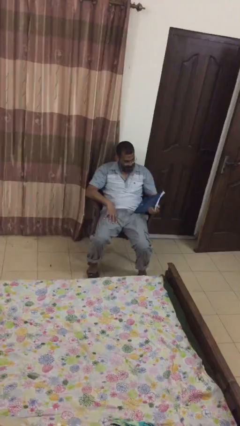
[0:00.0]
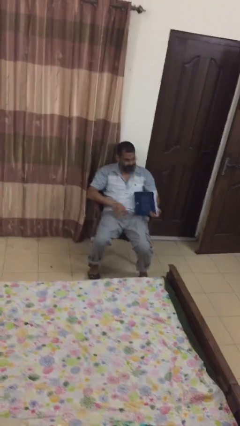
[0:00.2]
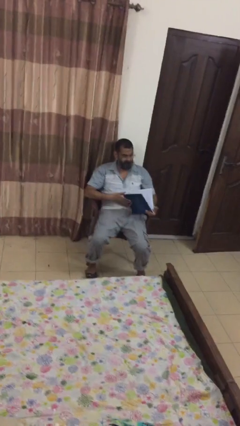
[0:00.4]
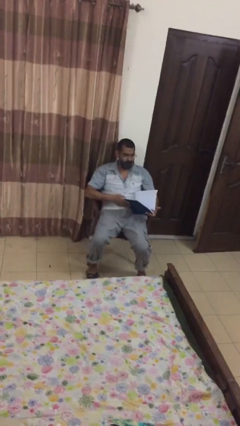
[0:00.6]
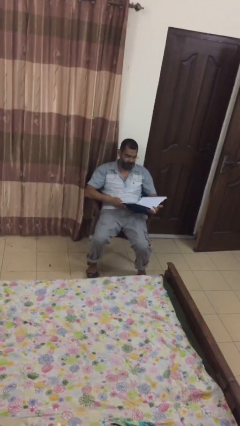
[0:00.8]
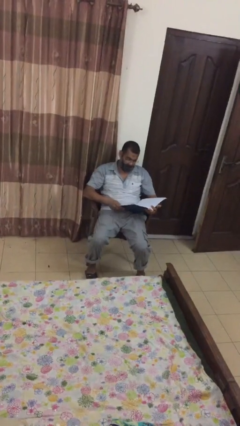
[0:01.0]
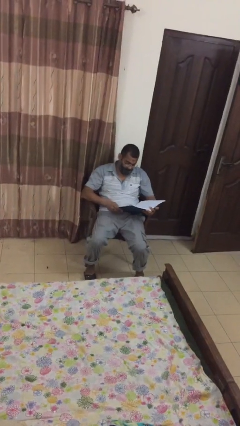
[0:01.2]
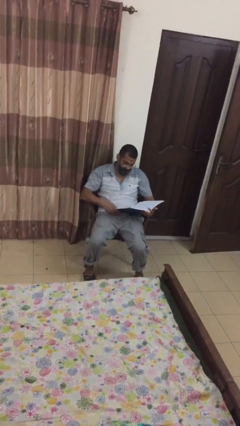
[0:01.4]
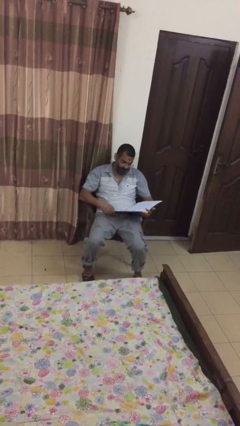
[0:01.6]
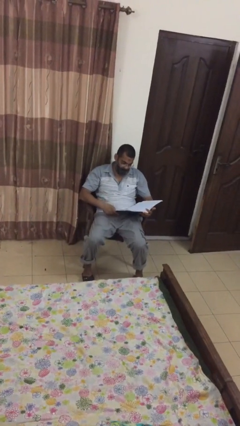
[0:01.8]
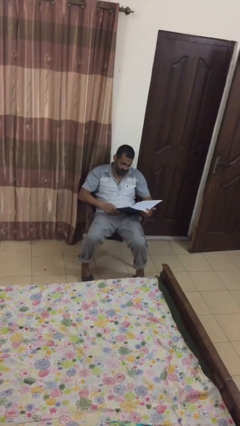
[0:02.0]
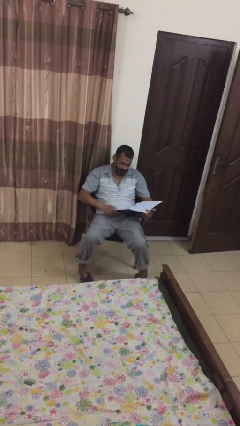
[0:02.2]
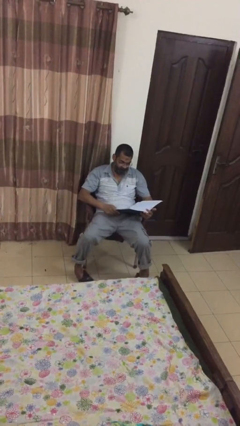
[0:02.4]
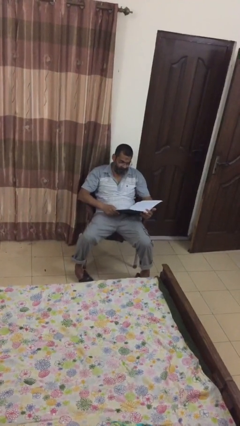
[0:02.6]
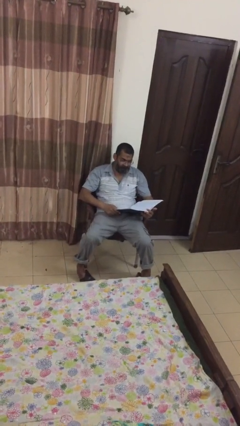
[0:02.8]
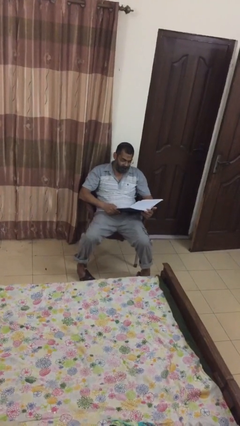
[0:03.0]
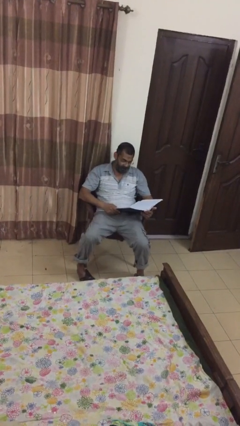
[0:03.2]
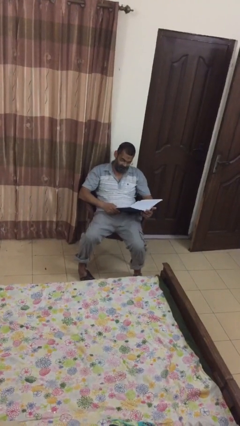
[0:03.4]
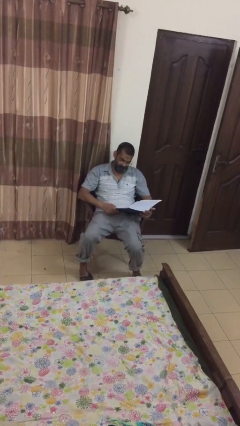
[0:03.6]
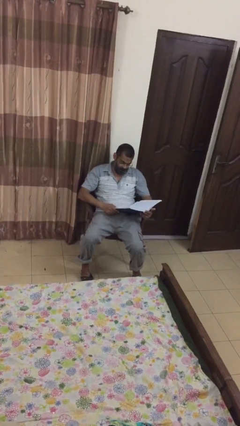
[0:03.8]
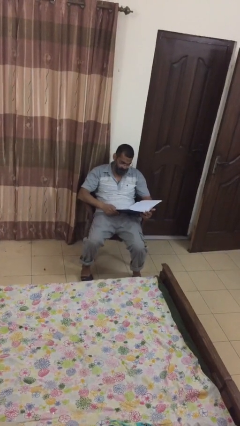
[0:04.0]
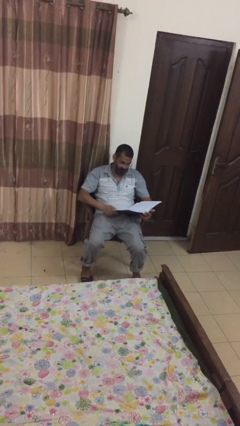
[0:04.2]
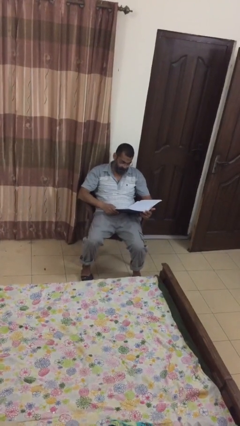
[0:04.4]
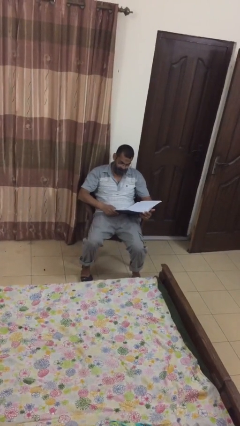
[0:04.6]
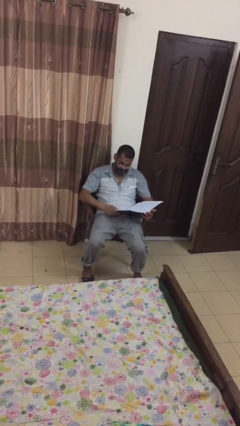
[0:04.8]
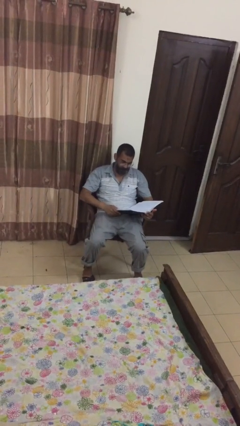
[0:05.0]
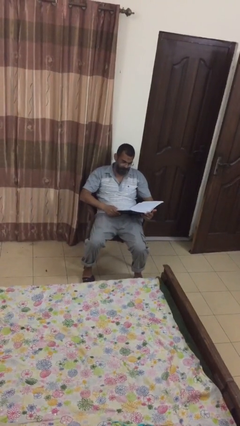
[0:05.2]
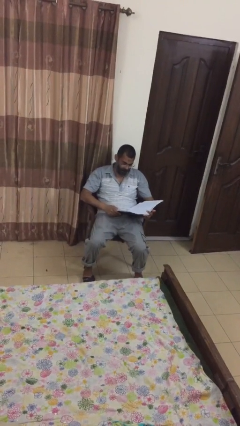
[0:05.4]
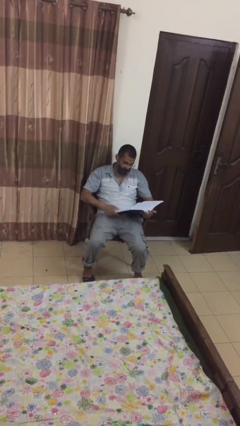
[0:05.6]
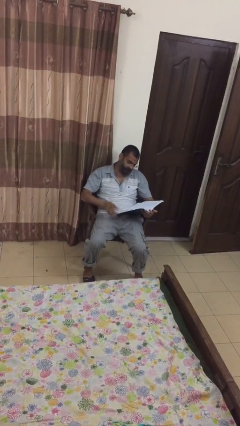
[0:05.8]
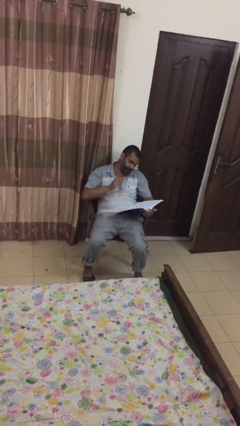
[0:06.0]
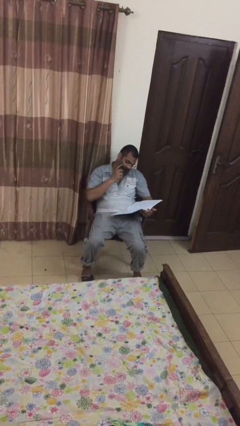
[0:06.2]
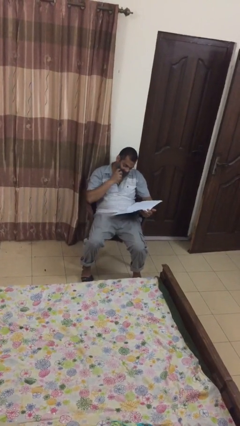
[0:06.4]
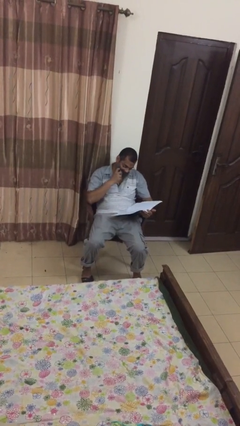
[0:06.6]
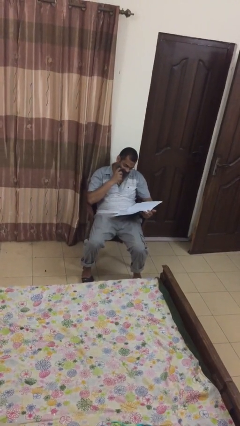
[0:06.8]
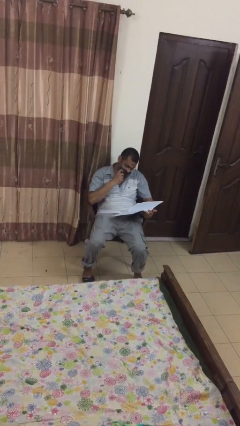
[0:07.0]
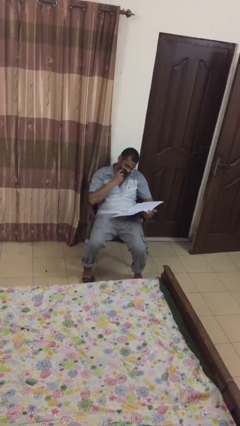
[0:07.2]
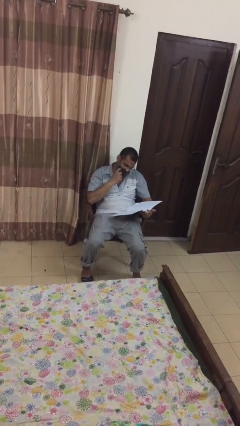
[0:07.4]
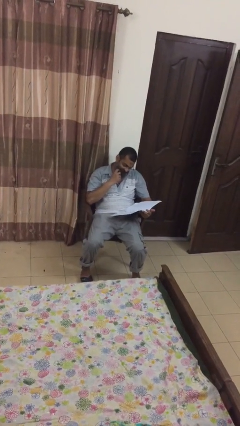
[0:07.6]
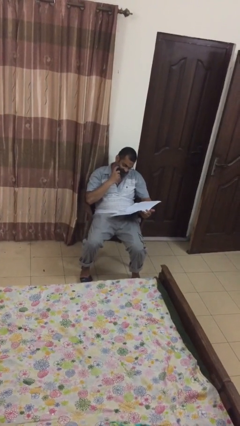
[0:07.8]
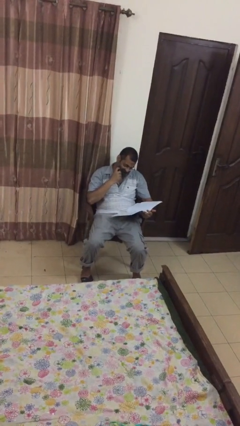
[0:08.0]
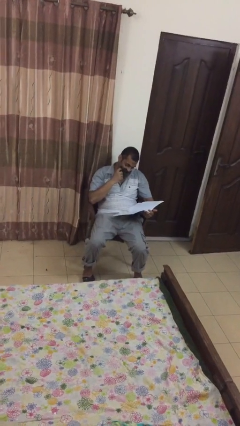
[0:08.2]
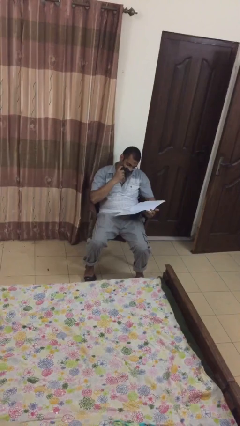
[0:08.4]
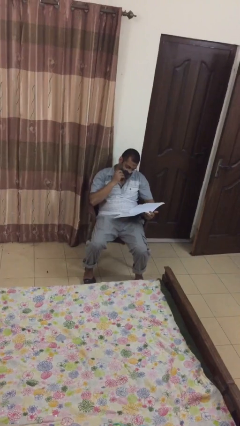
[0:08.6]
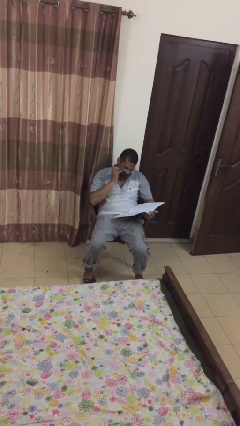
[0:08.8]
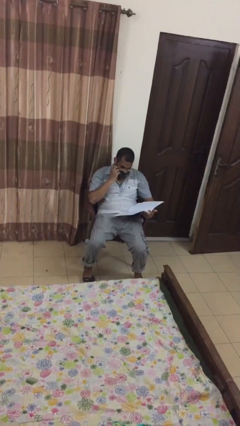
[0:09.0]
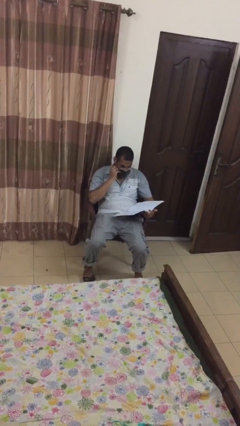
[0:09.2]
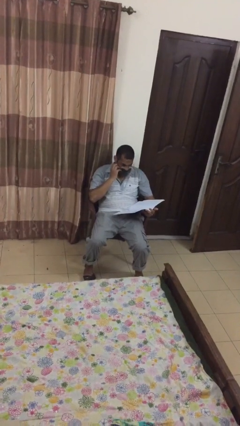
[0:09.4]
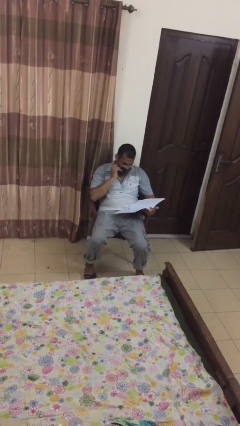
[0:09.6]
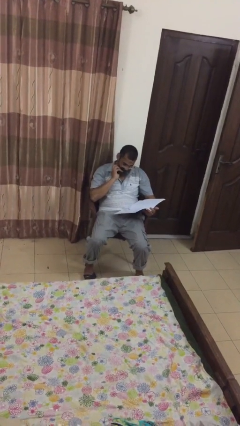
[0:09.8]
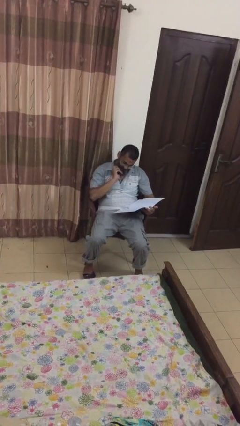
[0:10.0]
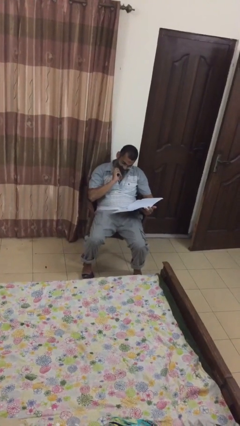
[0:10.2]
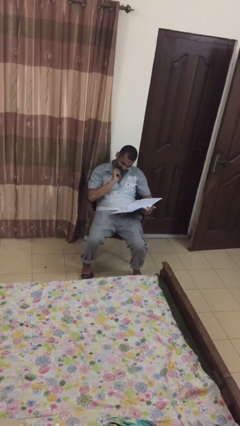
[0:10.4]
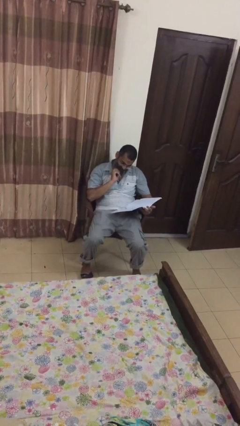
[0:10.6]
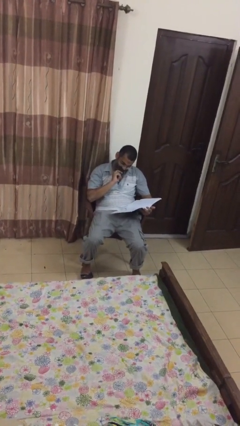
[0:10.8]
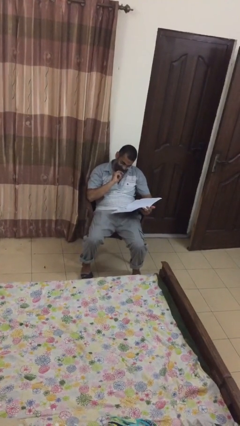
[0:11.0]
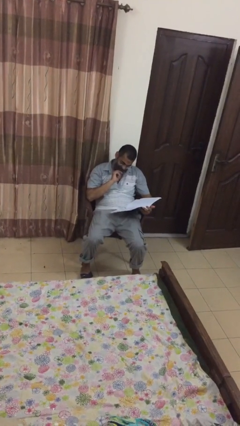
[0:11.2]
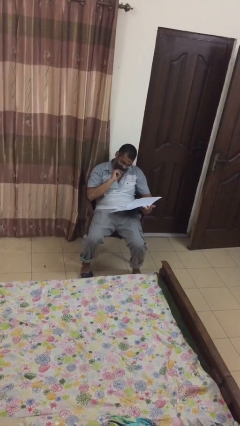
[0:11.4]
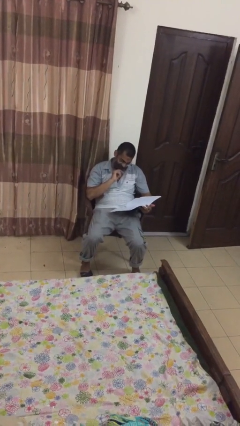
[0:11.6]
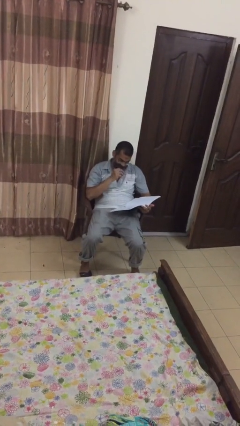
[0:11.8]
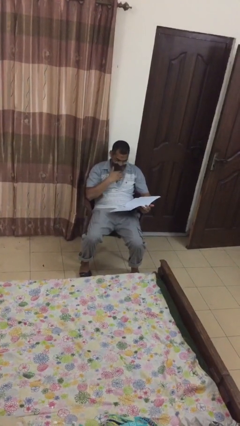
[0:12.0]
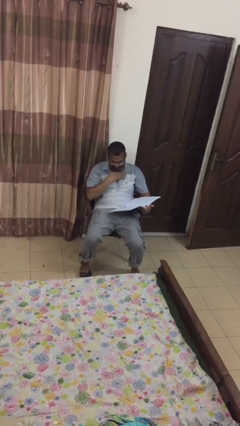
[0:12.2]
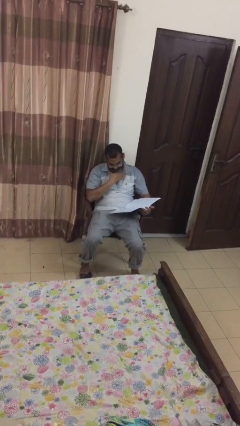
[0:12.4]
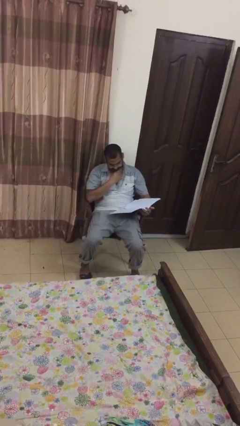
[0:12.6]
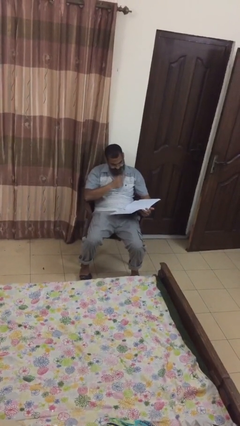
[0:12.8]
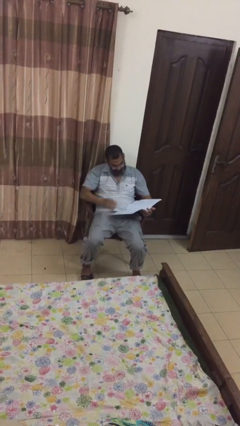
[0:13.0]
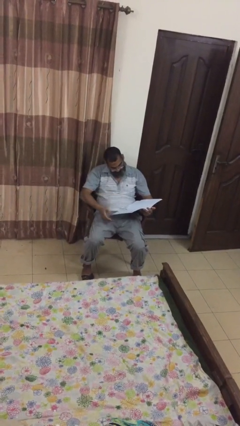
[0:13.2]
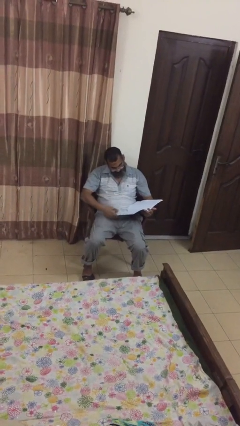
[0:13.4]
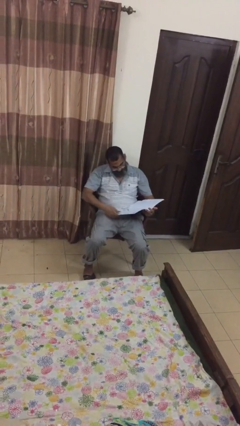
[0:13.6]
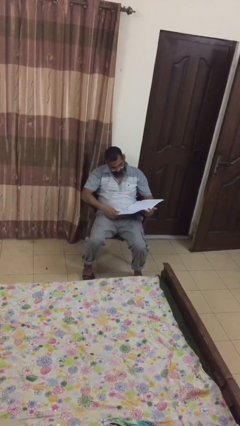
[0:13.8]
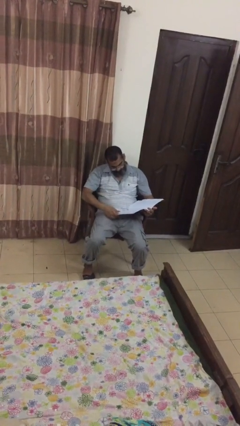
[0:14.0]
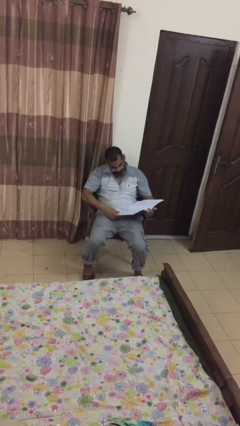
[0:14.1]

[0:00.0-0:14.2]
person reads document

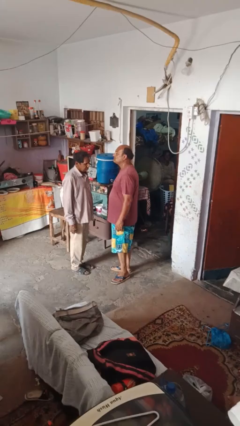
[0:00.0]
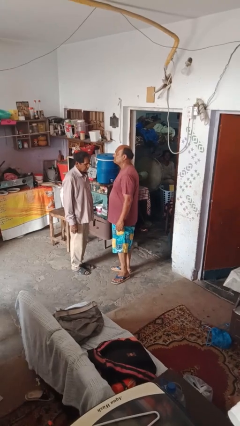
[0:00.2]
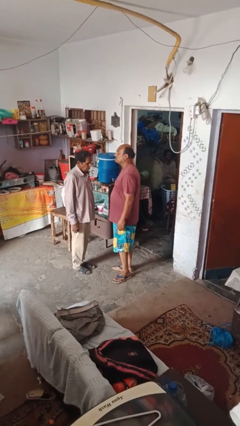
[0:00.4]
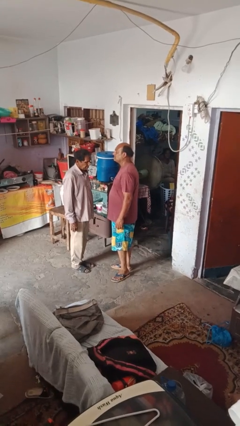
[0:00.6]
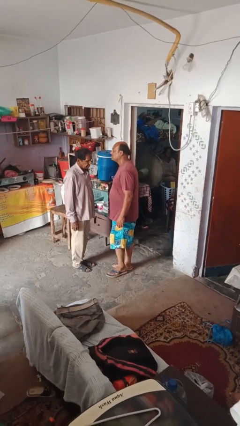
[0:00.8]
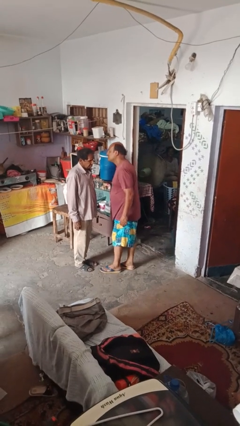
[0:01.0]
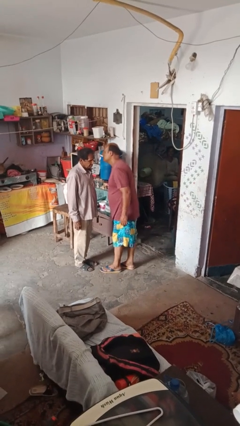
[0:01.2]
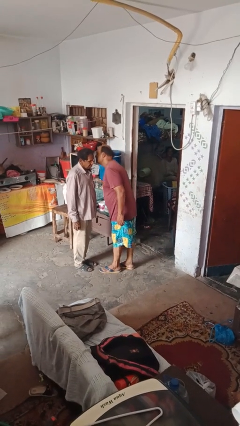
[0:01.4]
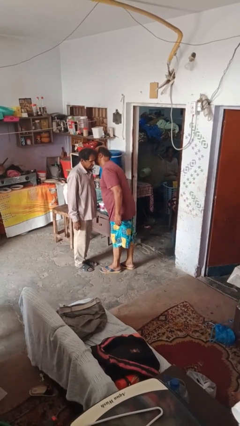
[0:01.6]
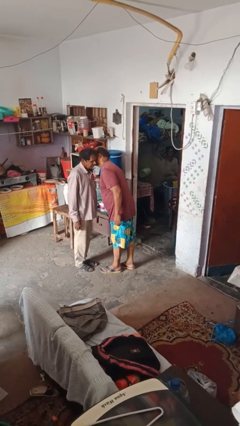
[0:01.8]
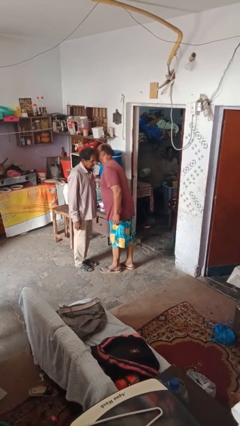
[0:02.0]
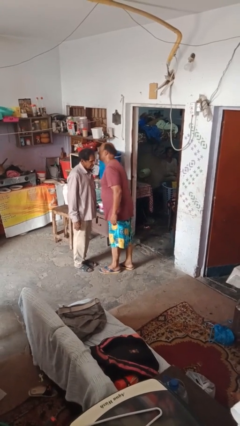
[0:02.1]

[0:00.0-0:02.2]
person kisses cheek of person

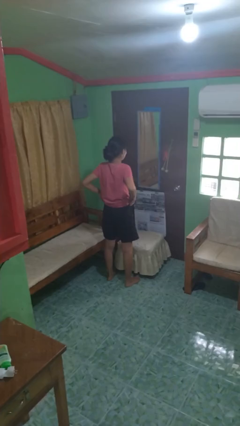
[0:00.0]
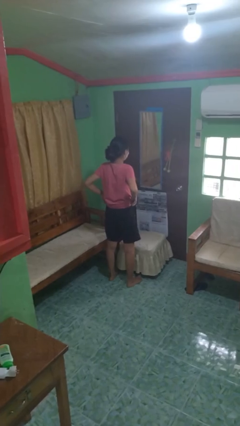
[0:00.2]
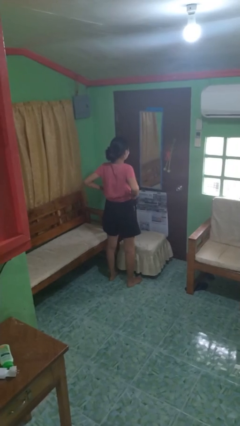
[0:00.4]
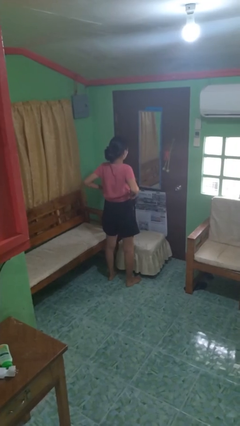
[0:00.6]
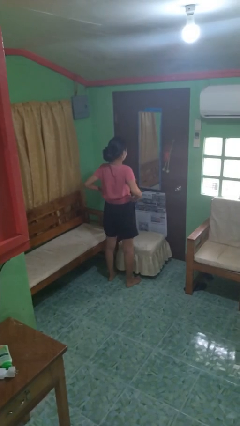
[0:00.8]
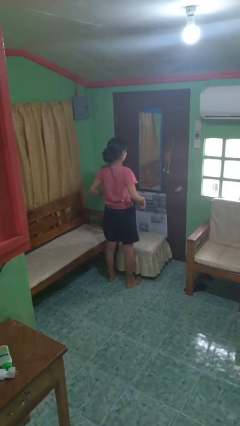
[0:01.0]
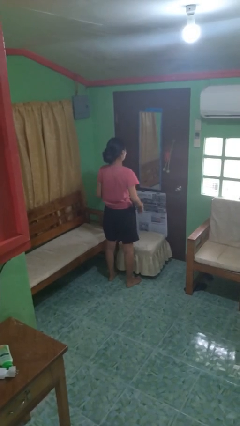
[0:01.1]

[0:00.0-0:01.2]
person hikes up pants

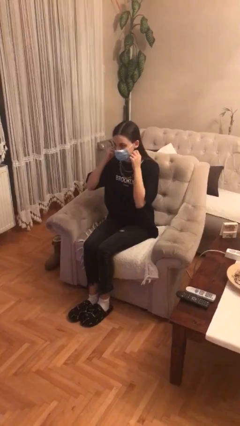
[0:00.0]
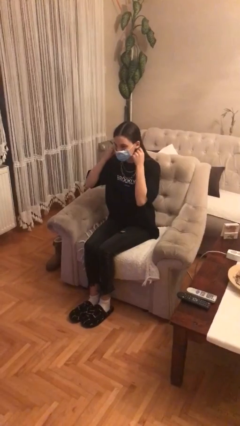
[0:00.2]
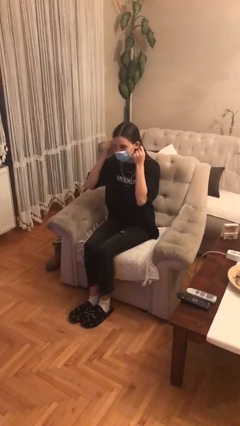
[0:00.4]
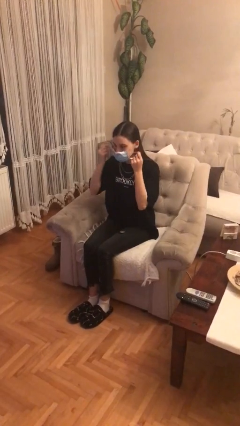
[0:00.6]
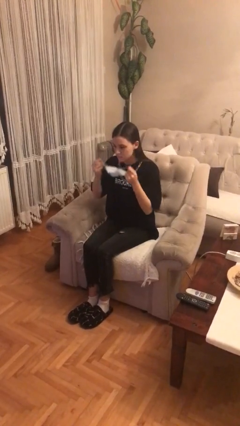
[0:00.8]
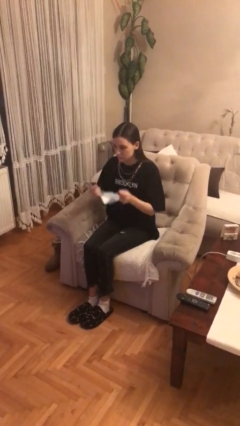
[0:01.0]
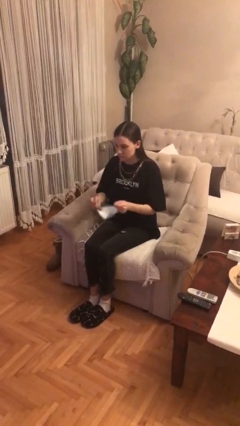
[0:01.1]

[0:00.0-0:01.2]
person takes off facemask
